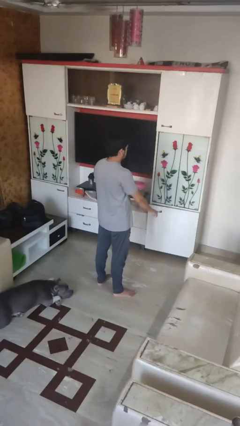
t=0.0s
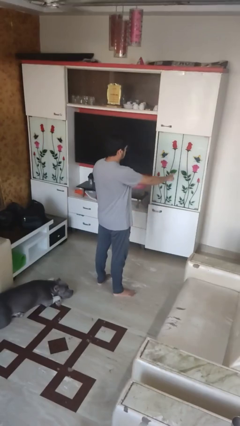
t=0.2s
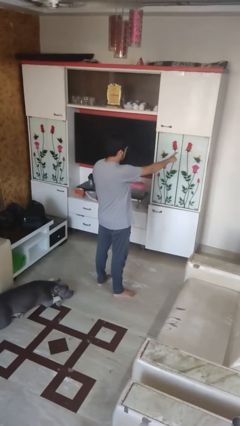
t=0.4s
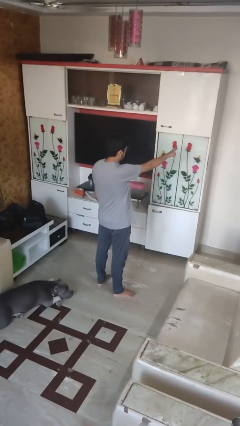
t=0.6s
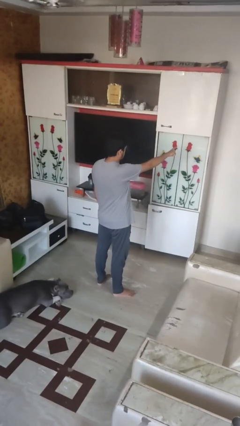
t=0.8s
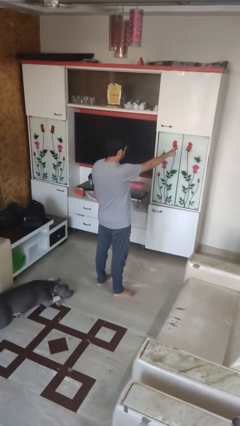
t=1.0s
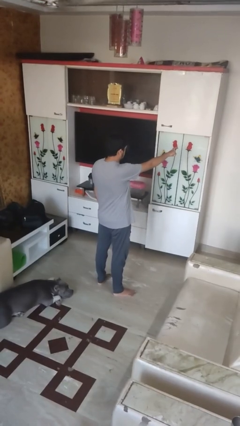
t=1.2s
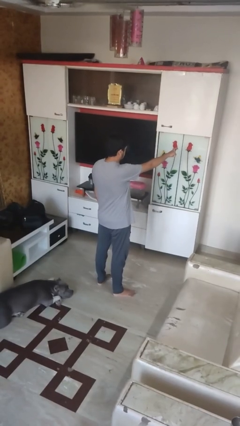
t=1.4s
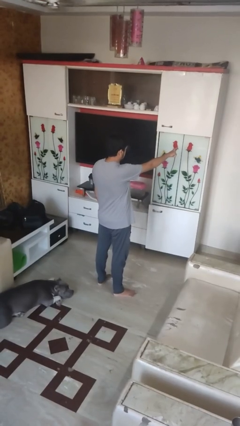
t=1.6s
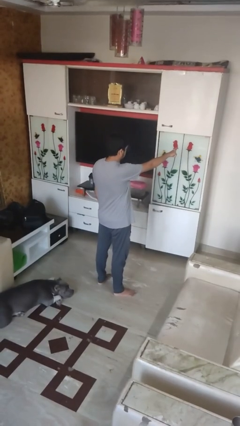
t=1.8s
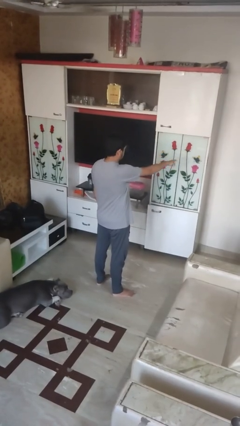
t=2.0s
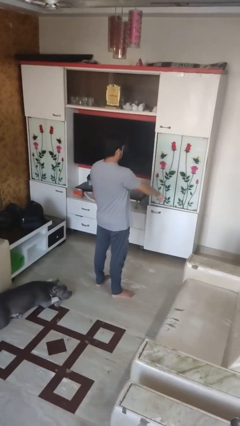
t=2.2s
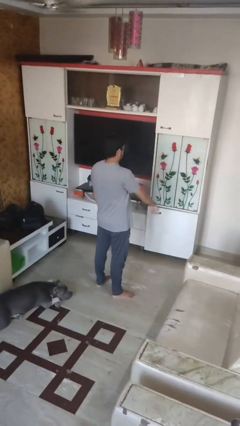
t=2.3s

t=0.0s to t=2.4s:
person points at person

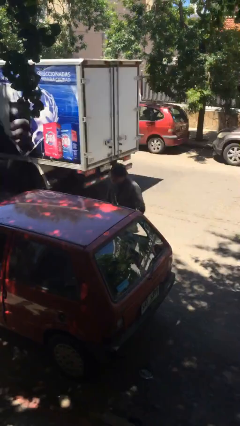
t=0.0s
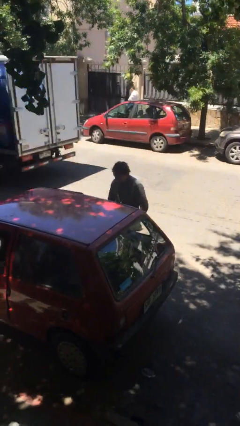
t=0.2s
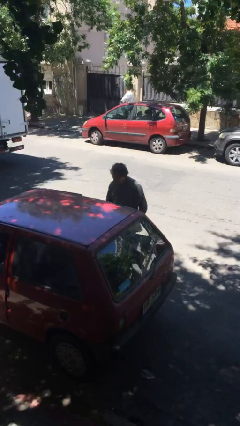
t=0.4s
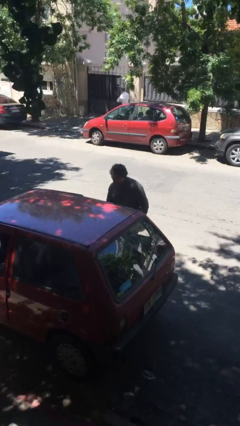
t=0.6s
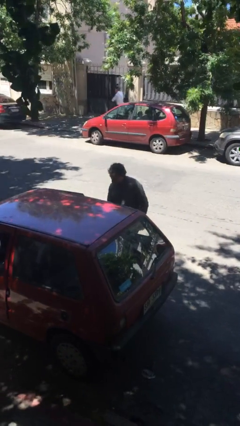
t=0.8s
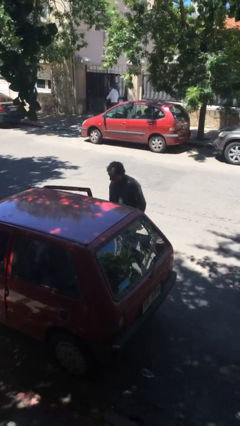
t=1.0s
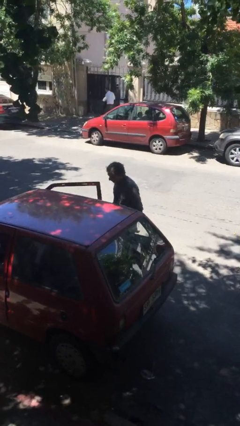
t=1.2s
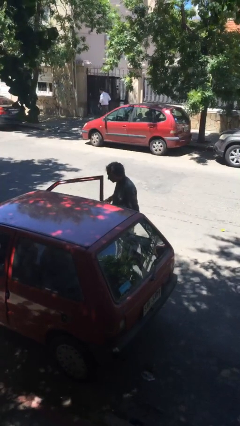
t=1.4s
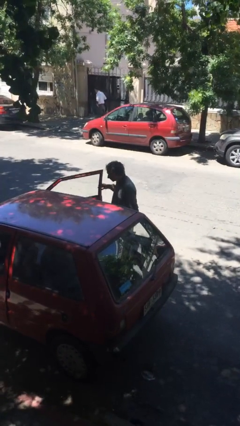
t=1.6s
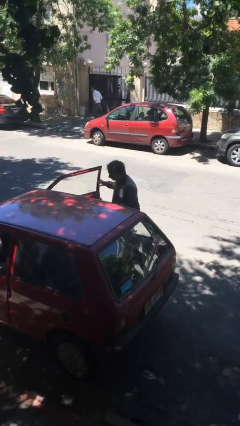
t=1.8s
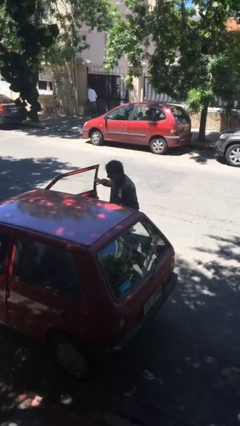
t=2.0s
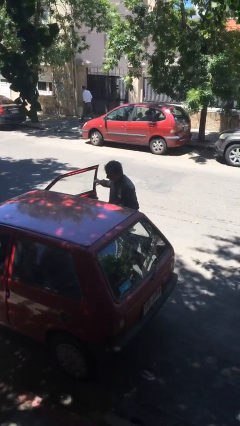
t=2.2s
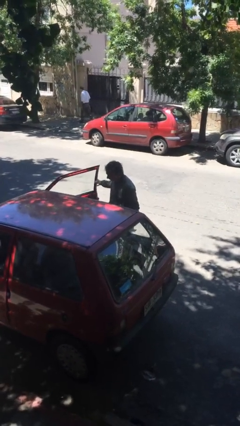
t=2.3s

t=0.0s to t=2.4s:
person opens car door

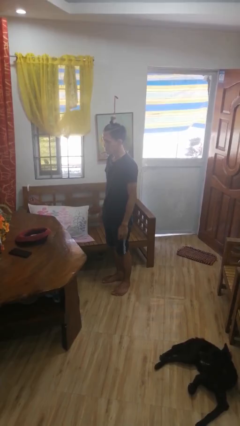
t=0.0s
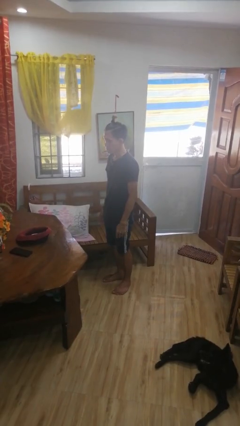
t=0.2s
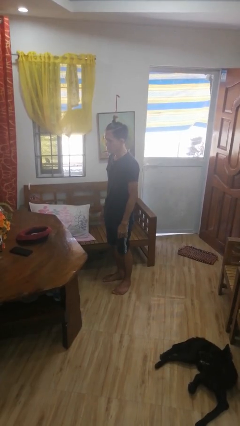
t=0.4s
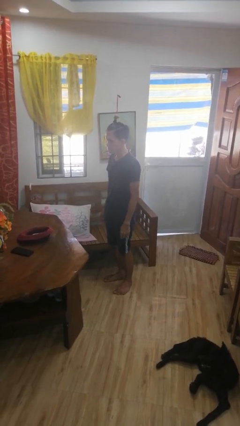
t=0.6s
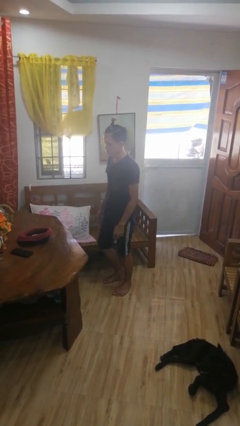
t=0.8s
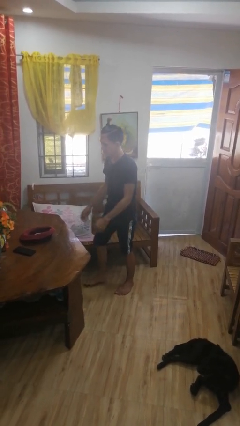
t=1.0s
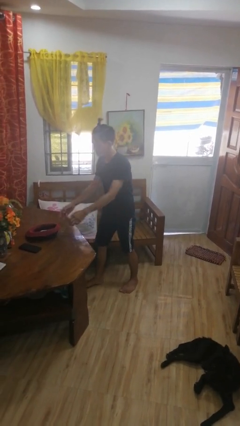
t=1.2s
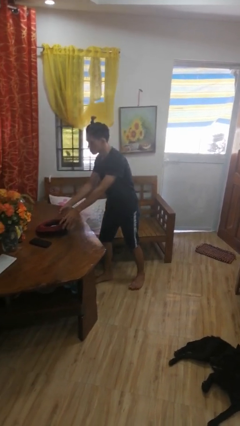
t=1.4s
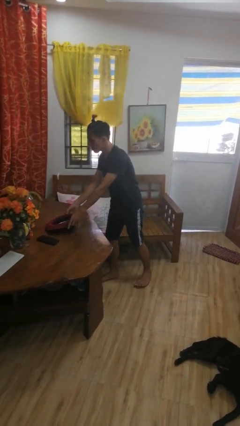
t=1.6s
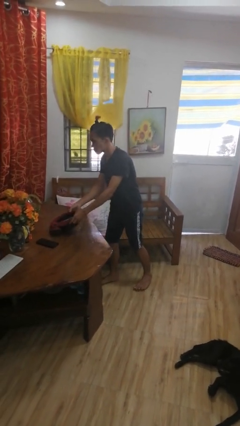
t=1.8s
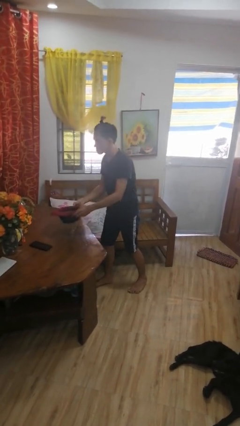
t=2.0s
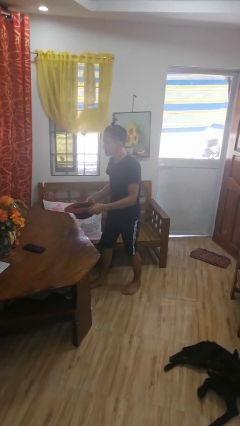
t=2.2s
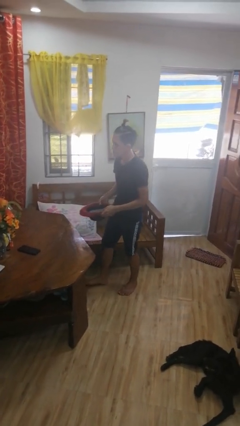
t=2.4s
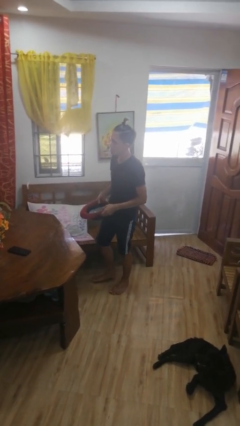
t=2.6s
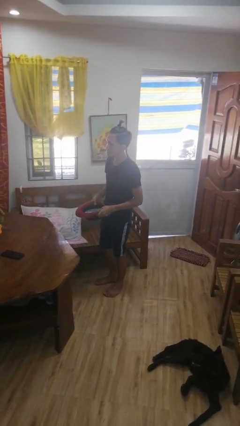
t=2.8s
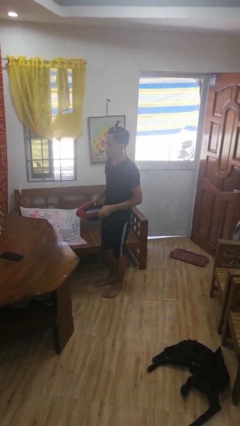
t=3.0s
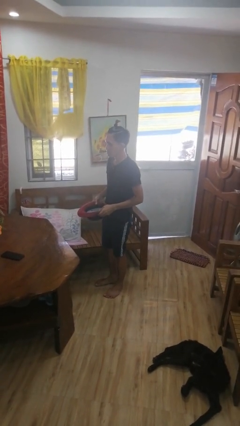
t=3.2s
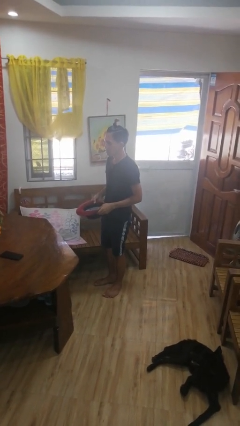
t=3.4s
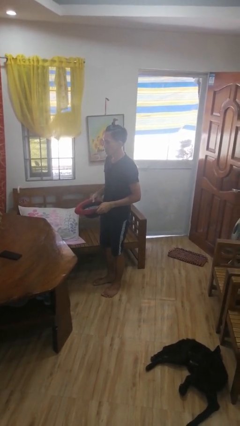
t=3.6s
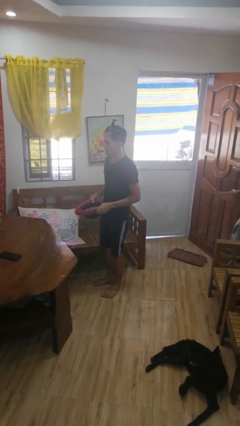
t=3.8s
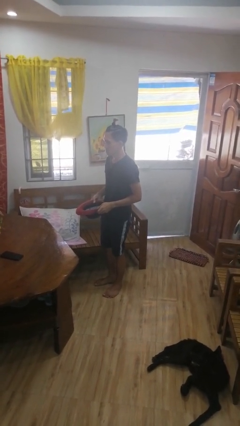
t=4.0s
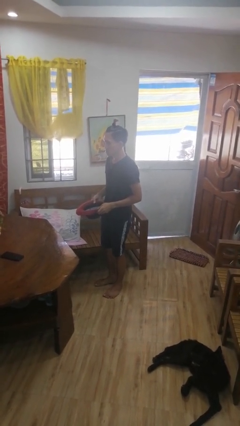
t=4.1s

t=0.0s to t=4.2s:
person picks up object from table

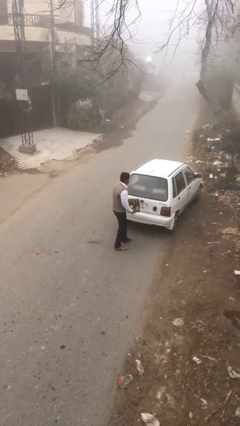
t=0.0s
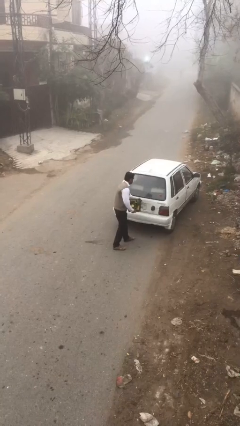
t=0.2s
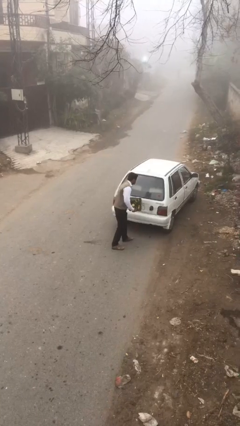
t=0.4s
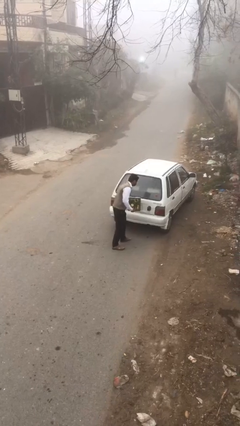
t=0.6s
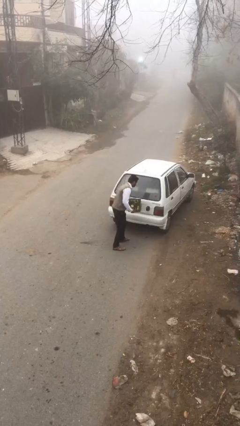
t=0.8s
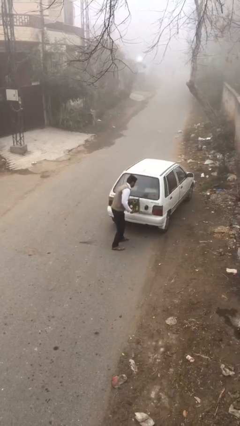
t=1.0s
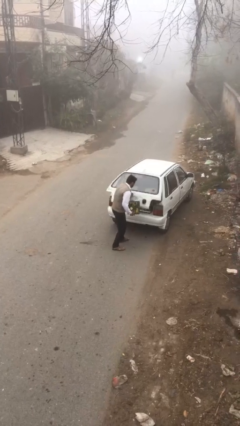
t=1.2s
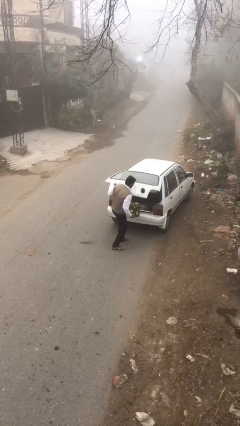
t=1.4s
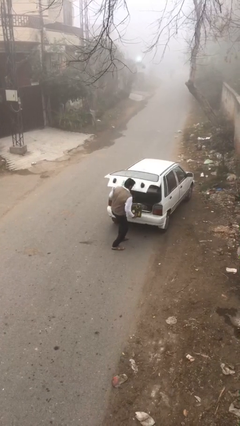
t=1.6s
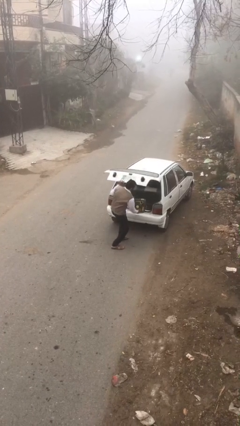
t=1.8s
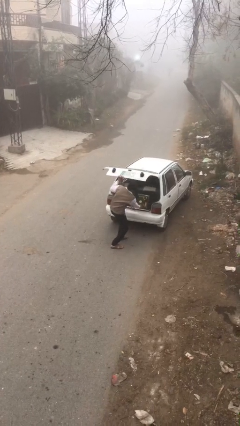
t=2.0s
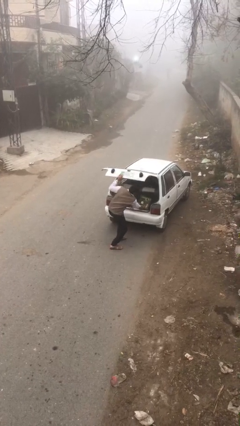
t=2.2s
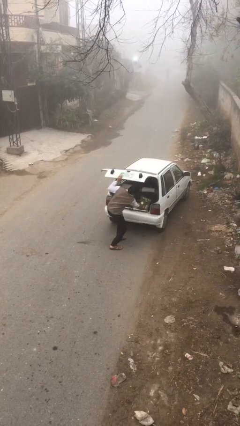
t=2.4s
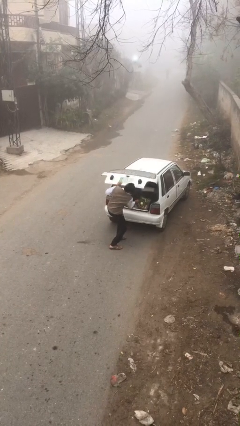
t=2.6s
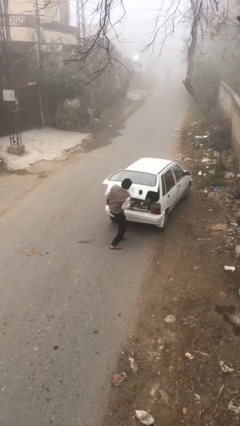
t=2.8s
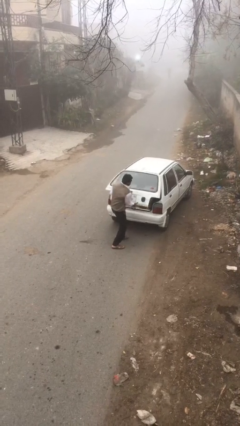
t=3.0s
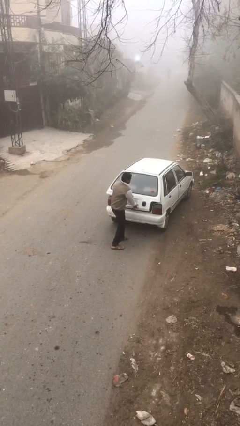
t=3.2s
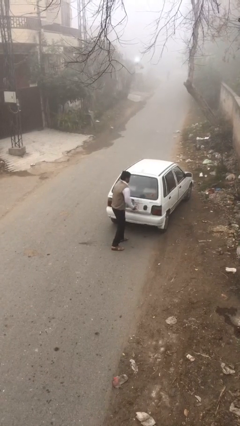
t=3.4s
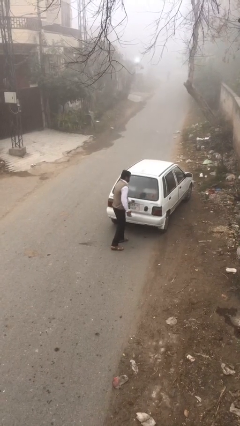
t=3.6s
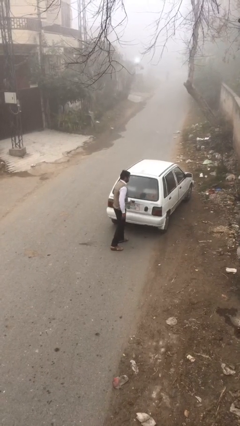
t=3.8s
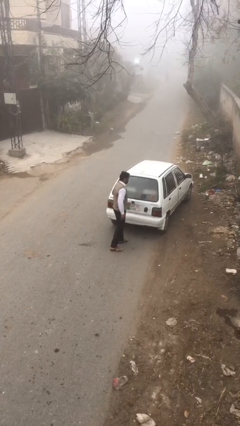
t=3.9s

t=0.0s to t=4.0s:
person loads car

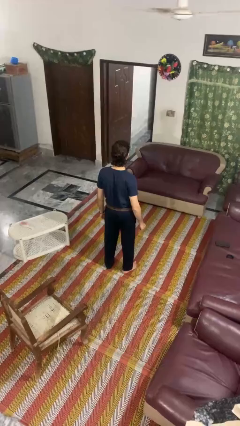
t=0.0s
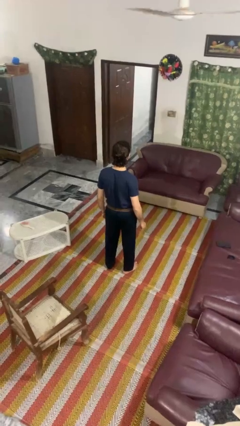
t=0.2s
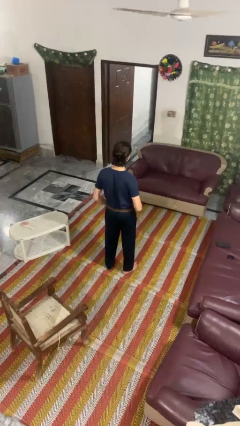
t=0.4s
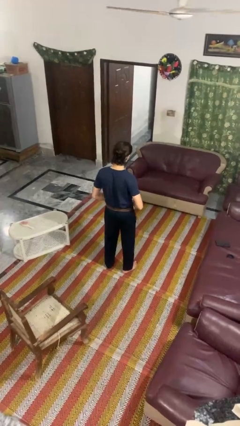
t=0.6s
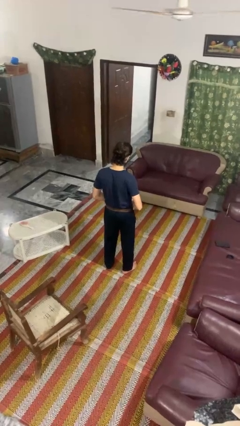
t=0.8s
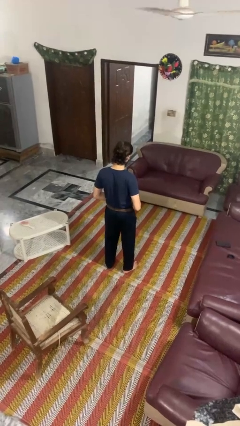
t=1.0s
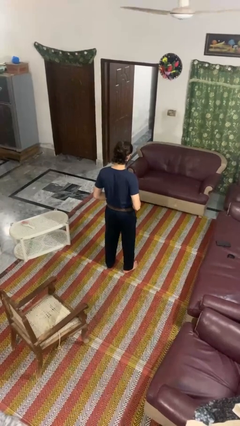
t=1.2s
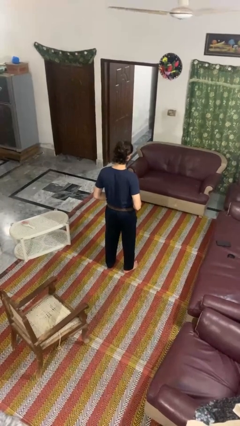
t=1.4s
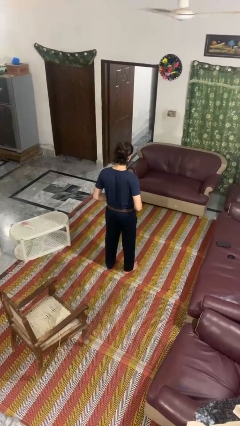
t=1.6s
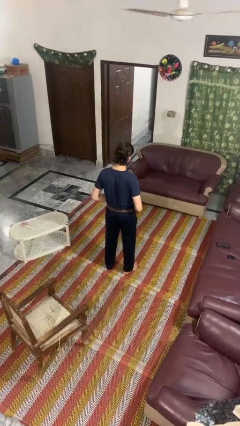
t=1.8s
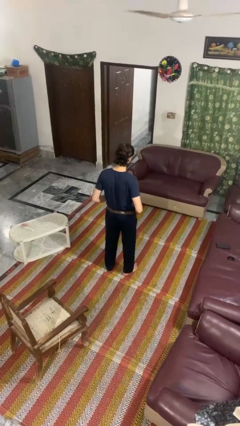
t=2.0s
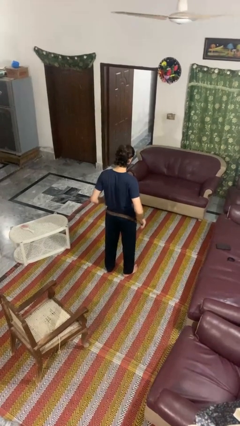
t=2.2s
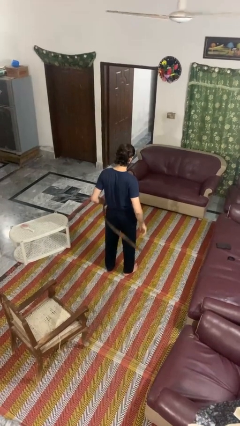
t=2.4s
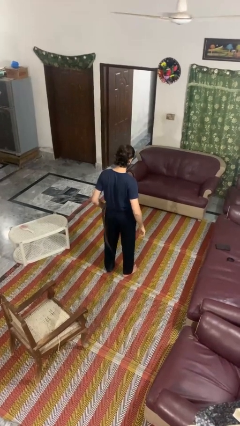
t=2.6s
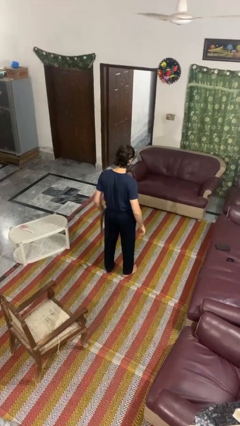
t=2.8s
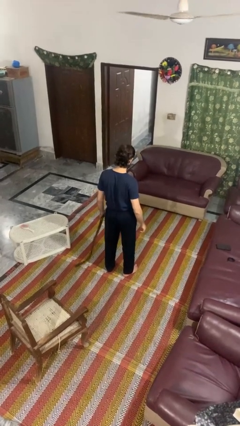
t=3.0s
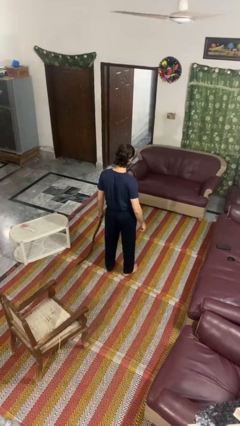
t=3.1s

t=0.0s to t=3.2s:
person takes off belt

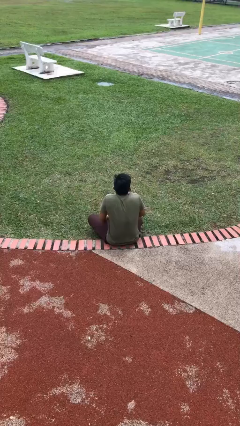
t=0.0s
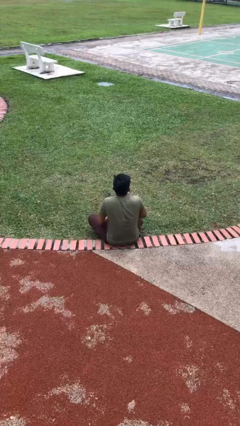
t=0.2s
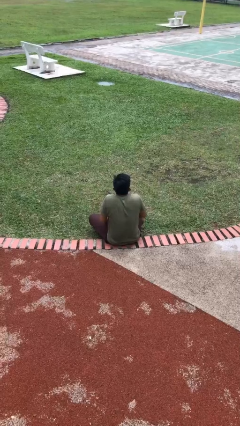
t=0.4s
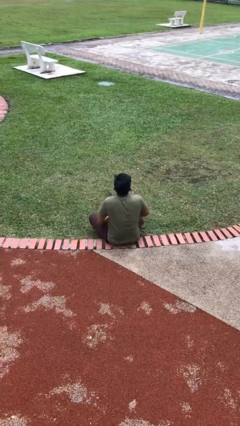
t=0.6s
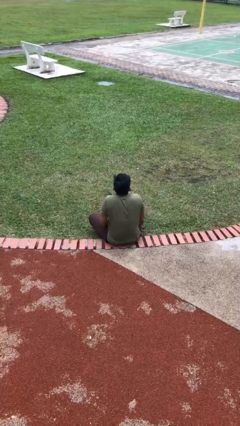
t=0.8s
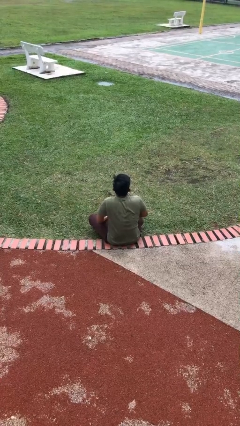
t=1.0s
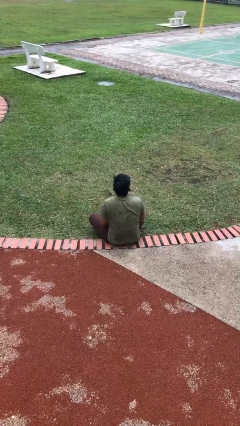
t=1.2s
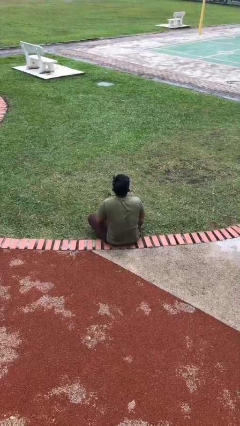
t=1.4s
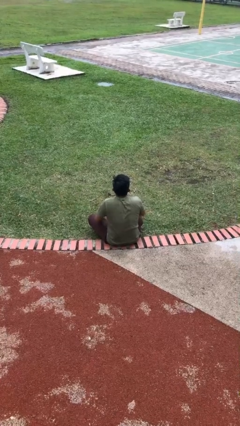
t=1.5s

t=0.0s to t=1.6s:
person shrugs
